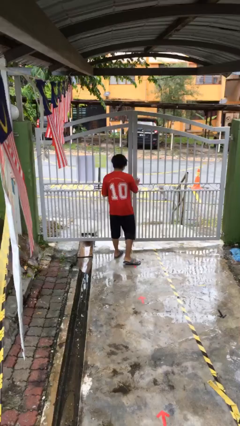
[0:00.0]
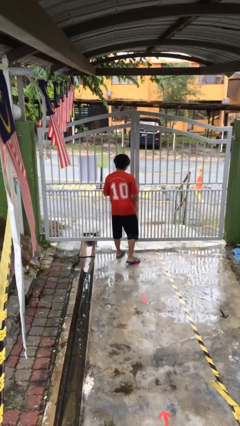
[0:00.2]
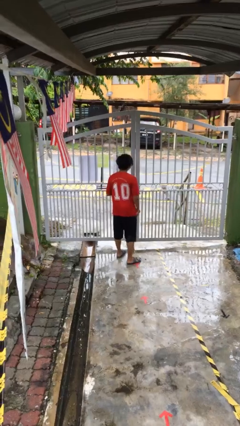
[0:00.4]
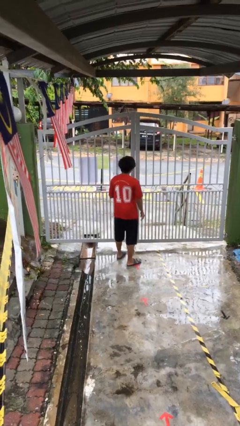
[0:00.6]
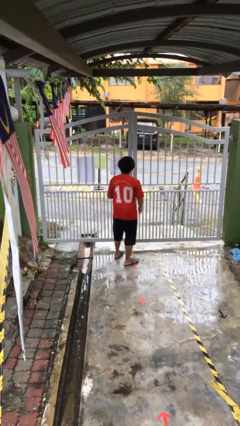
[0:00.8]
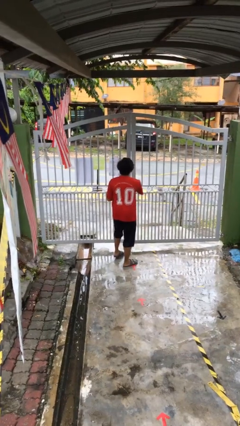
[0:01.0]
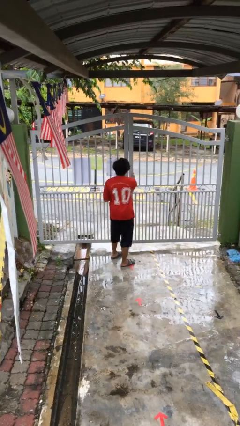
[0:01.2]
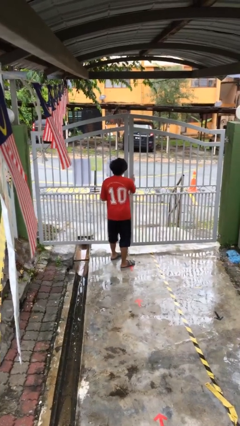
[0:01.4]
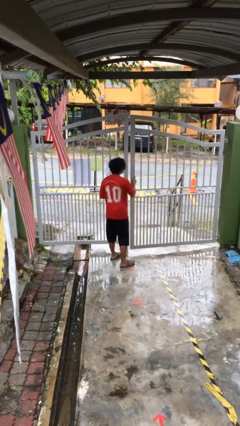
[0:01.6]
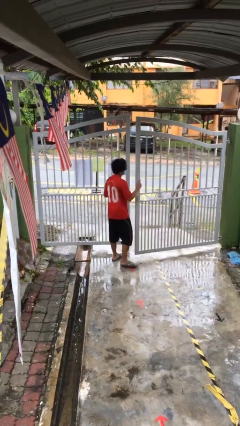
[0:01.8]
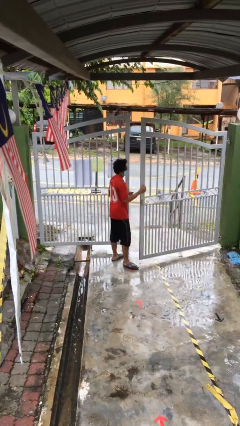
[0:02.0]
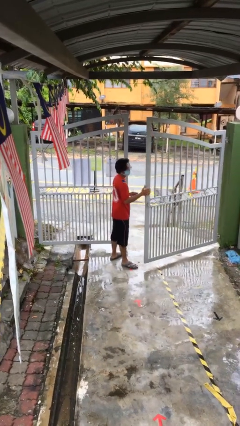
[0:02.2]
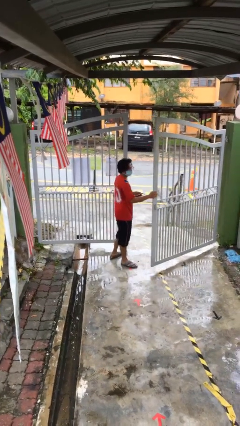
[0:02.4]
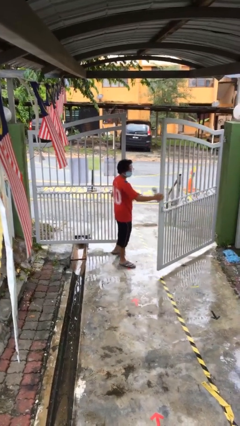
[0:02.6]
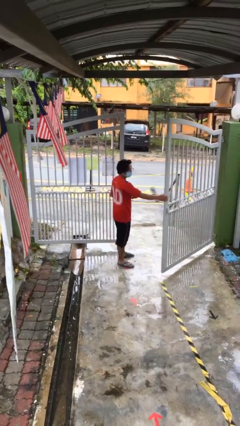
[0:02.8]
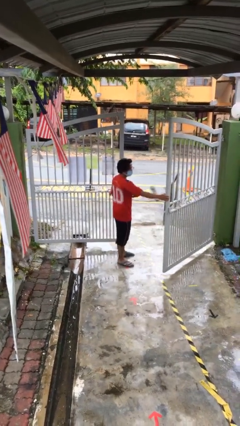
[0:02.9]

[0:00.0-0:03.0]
person opens facility door

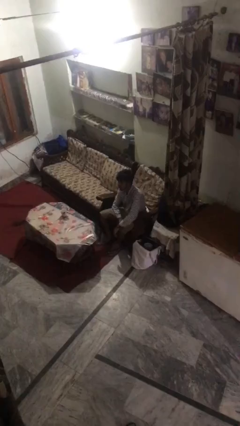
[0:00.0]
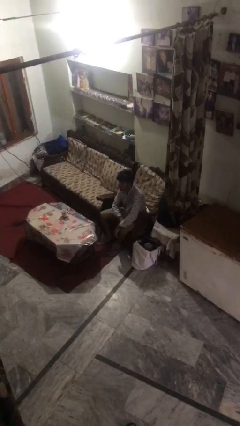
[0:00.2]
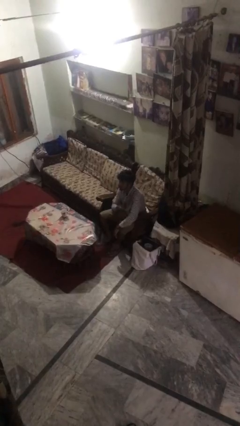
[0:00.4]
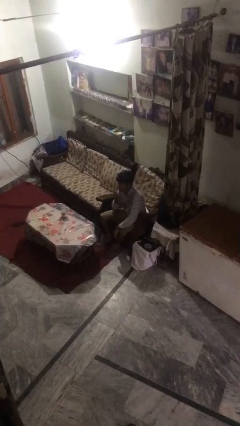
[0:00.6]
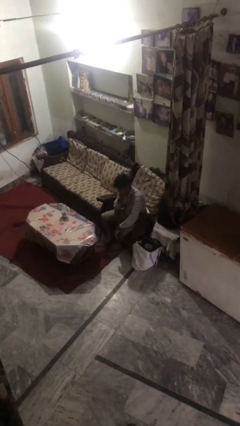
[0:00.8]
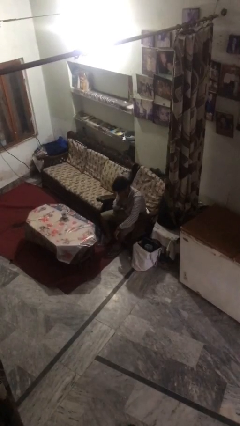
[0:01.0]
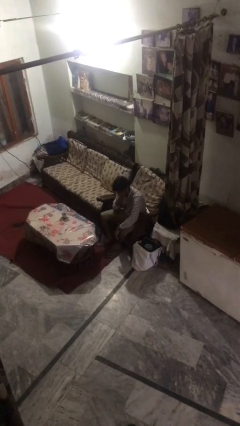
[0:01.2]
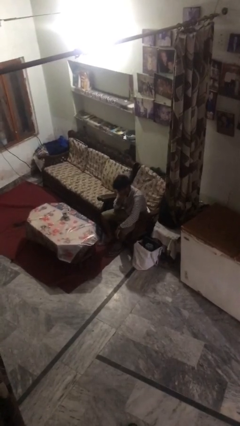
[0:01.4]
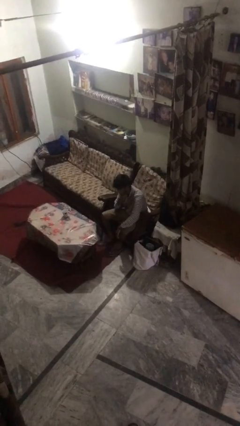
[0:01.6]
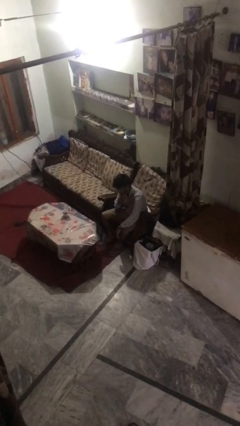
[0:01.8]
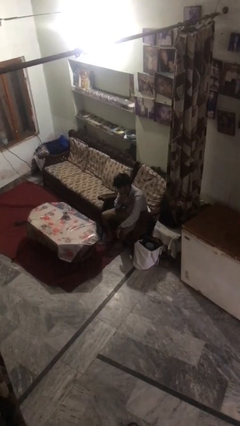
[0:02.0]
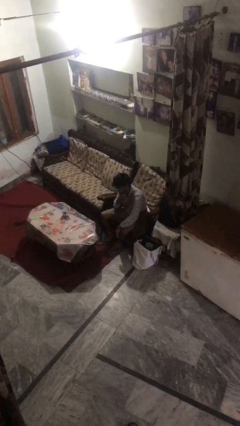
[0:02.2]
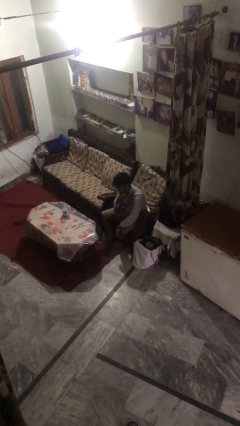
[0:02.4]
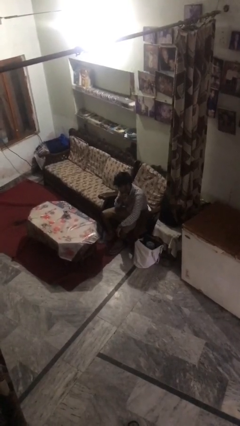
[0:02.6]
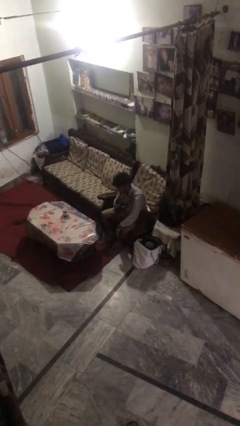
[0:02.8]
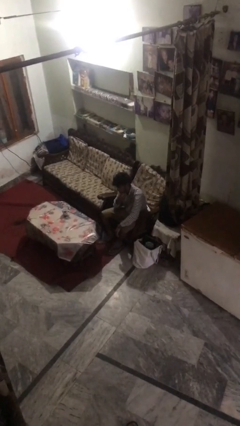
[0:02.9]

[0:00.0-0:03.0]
person strokes chin

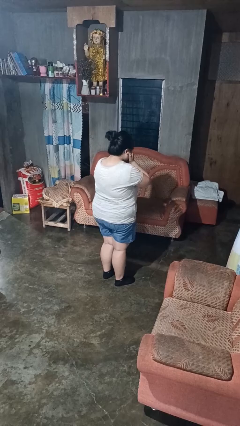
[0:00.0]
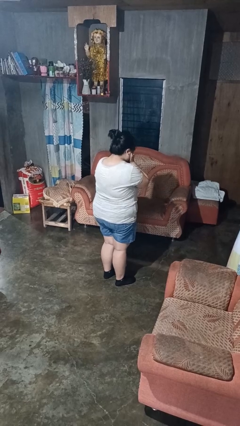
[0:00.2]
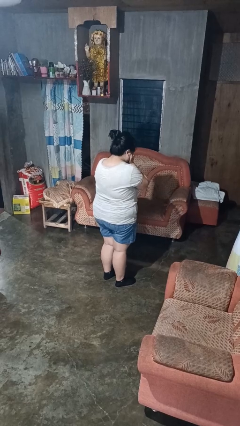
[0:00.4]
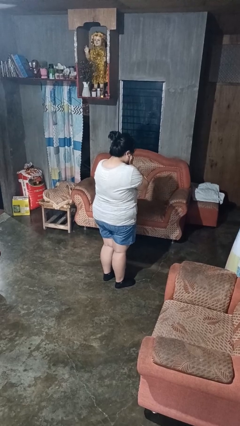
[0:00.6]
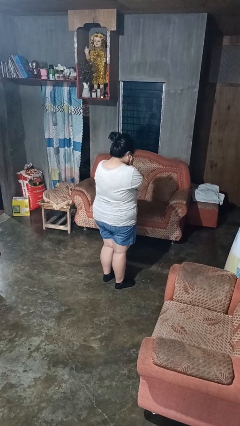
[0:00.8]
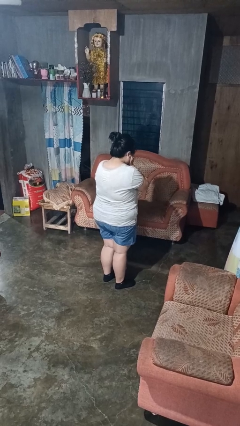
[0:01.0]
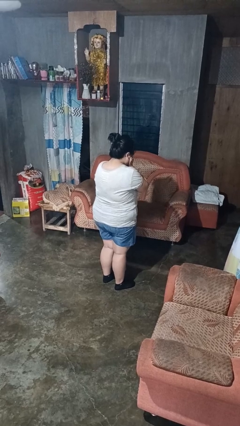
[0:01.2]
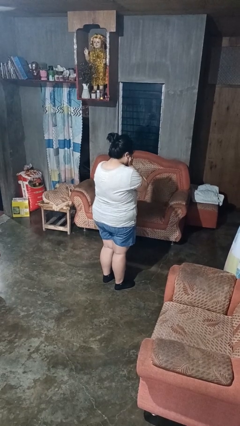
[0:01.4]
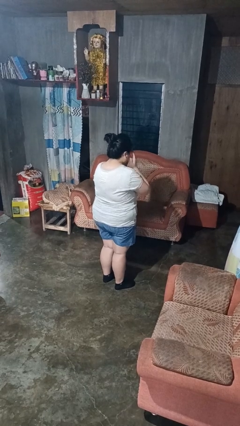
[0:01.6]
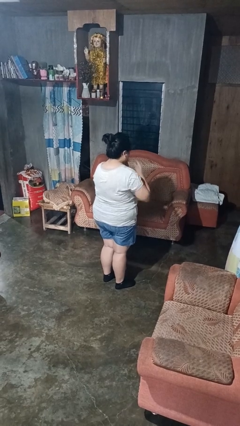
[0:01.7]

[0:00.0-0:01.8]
person covers face with hands

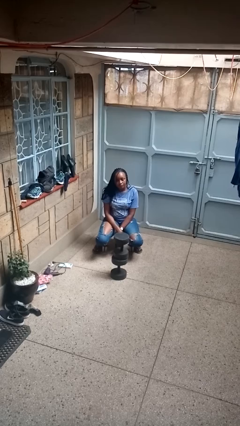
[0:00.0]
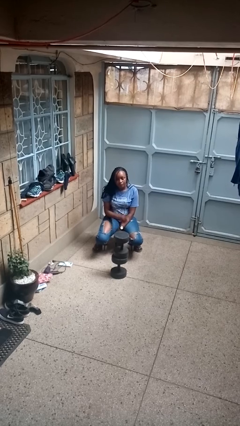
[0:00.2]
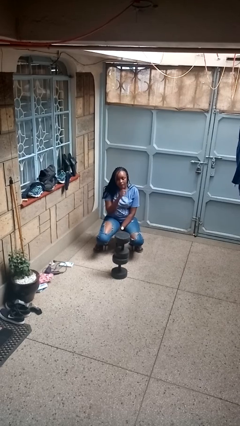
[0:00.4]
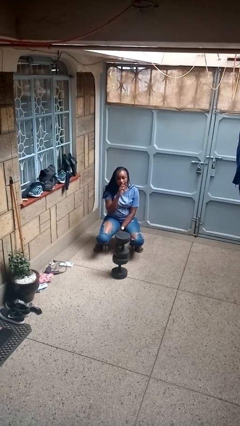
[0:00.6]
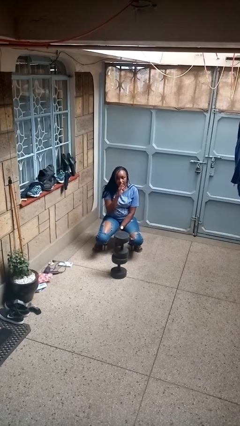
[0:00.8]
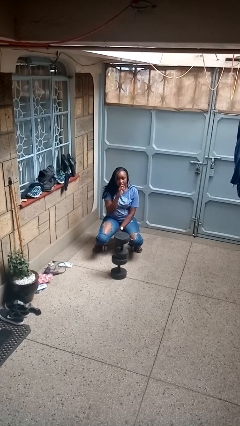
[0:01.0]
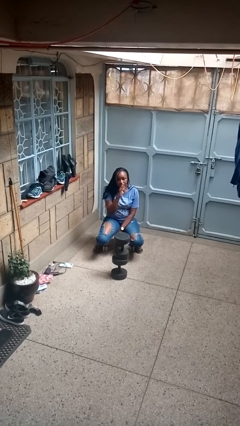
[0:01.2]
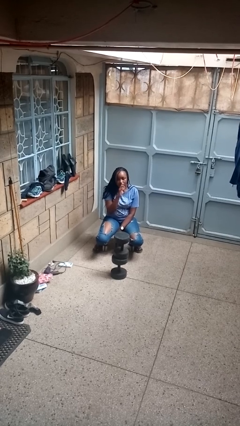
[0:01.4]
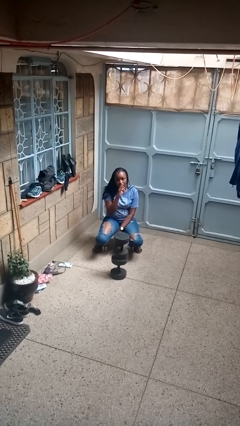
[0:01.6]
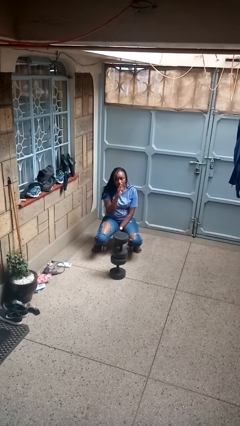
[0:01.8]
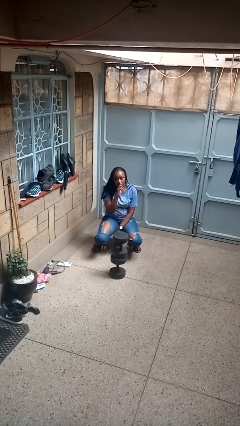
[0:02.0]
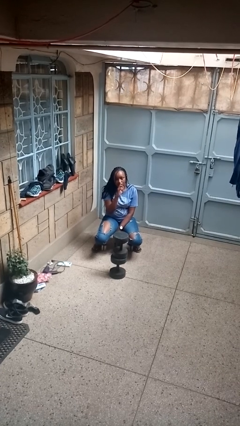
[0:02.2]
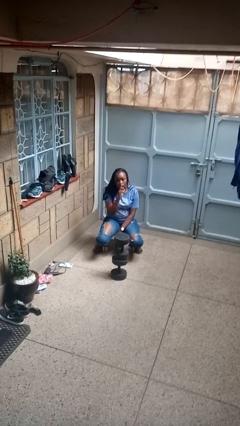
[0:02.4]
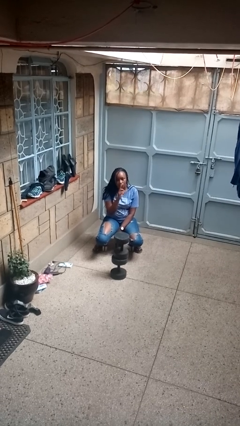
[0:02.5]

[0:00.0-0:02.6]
person gestures be quiet

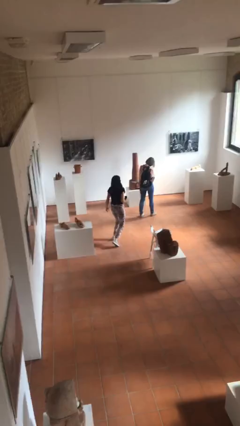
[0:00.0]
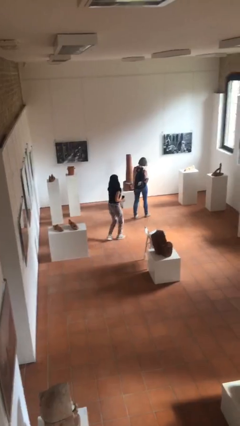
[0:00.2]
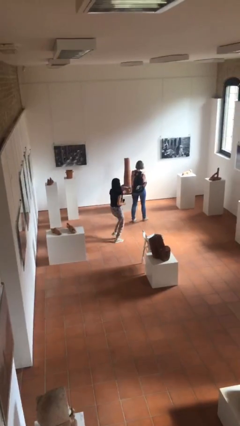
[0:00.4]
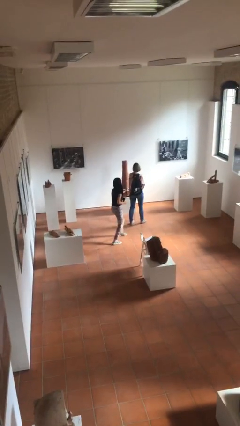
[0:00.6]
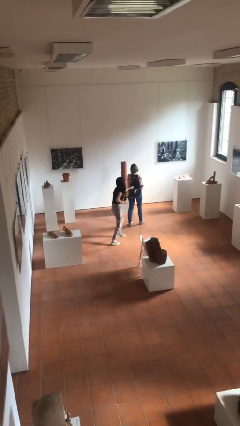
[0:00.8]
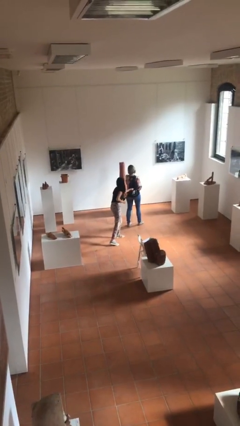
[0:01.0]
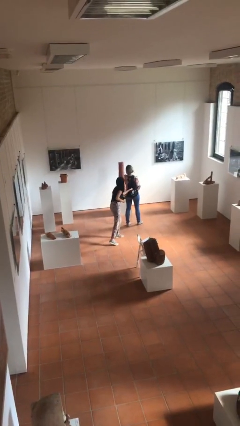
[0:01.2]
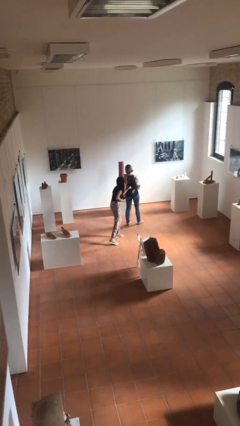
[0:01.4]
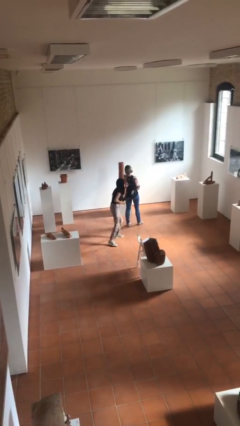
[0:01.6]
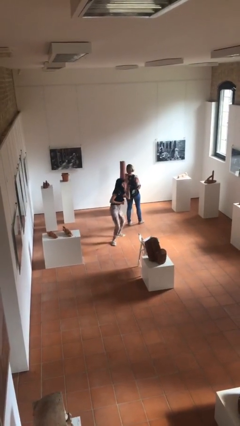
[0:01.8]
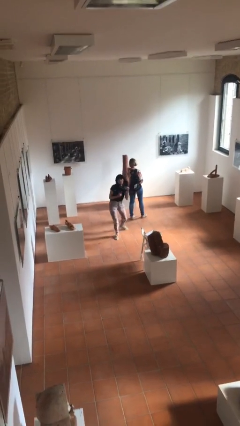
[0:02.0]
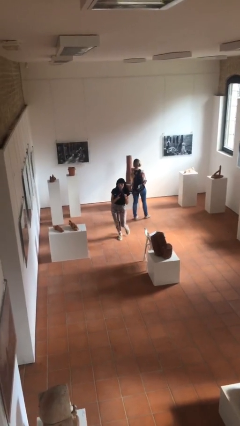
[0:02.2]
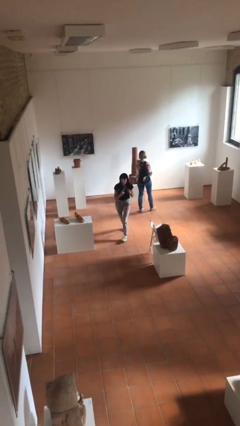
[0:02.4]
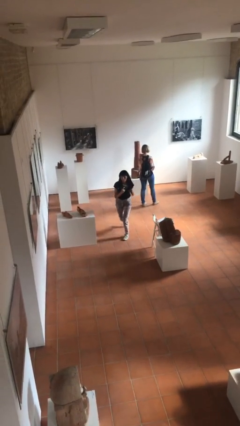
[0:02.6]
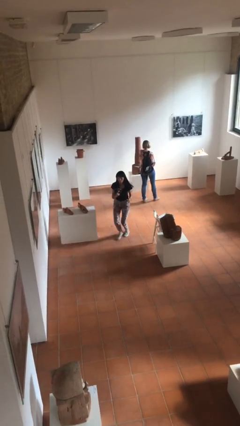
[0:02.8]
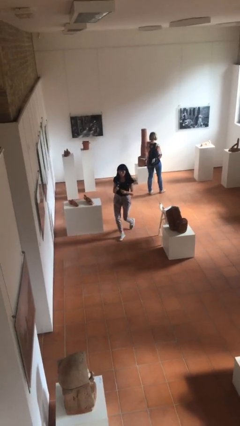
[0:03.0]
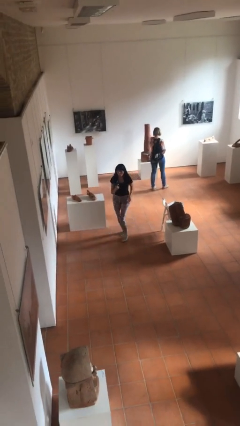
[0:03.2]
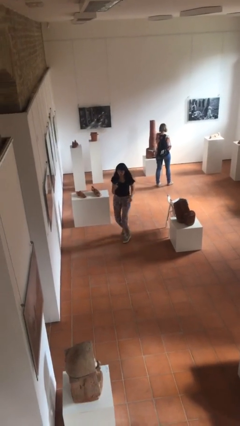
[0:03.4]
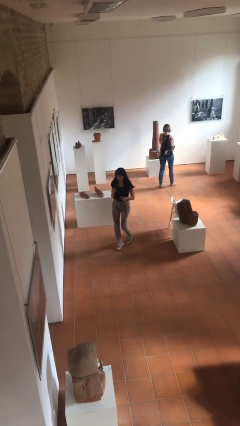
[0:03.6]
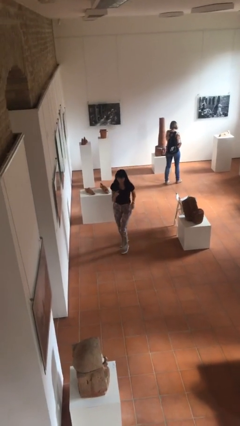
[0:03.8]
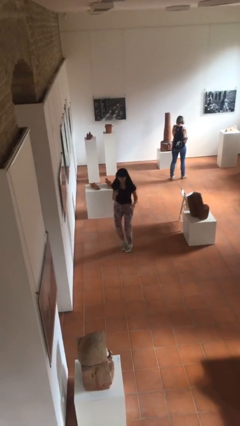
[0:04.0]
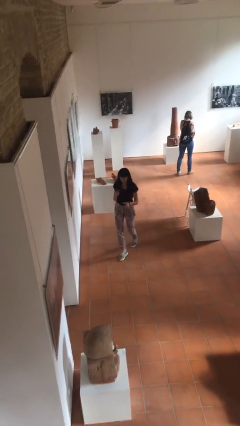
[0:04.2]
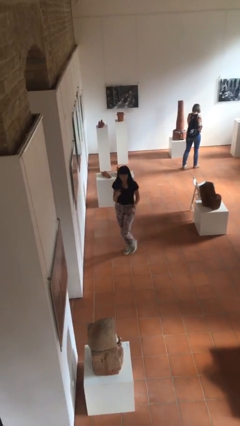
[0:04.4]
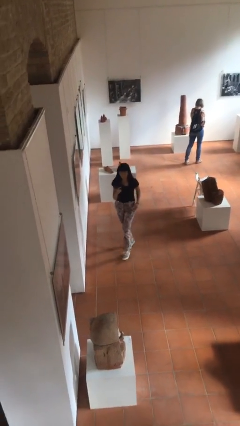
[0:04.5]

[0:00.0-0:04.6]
person steals object from person

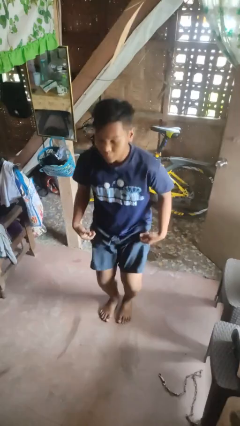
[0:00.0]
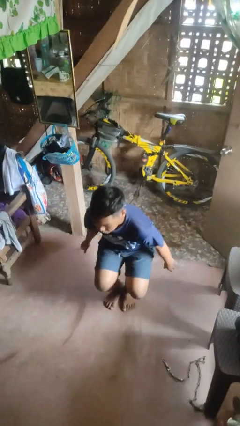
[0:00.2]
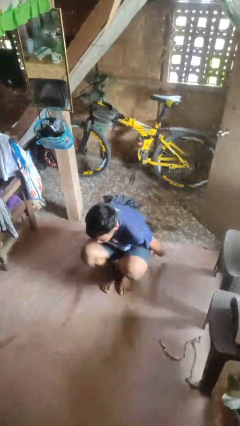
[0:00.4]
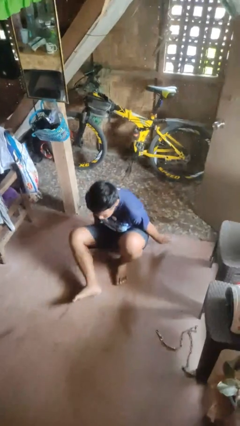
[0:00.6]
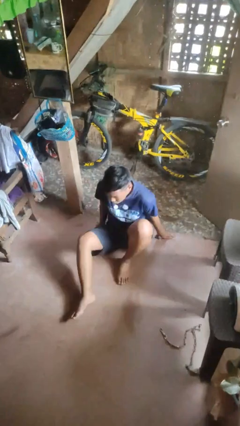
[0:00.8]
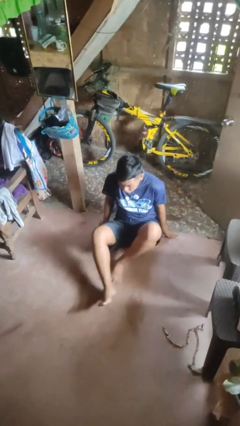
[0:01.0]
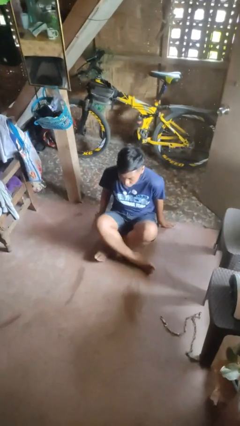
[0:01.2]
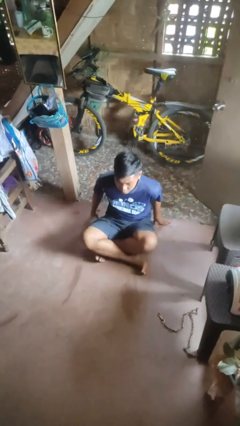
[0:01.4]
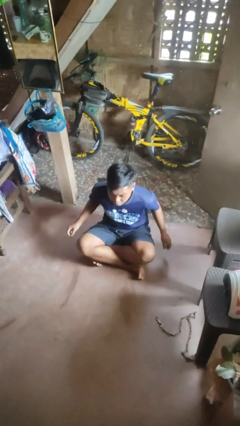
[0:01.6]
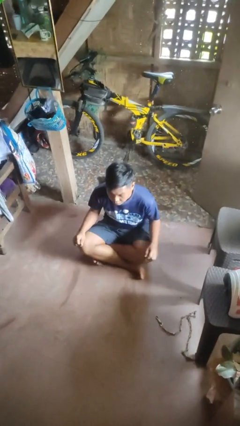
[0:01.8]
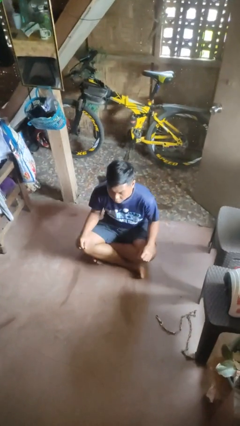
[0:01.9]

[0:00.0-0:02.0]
person sits crisscross

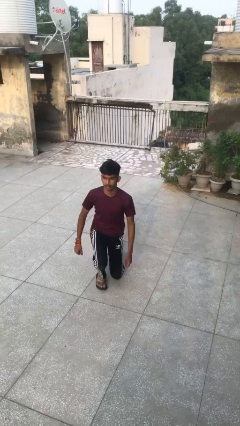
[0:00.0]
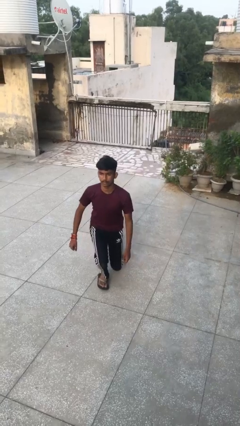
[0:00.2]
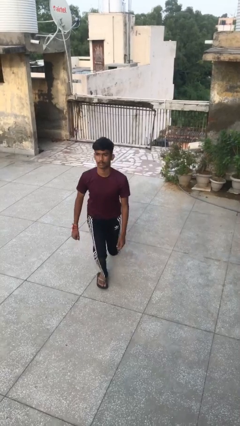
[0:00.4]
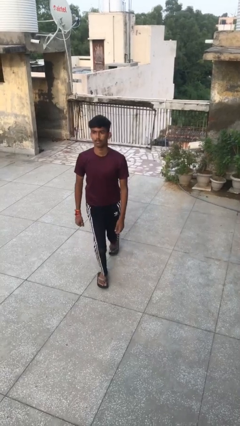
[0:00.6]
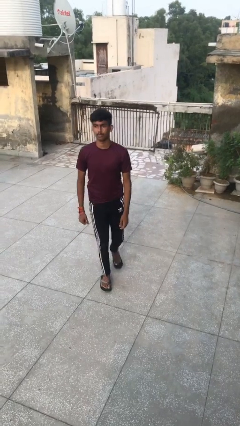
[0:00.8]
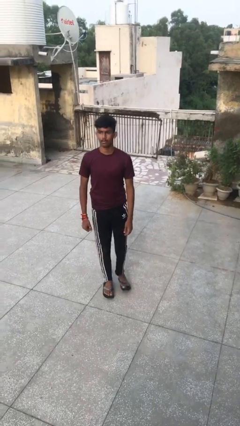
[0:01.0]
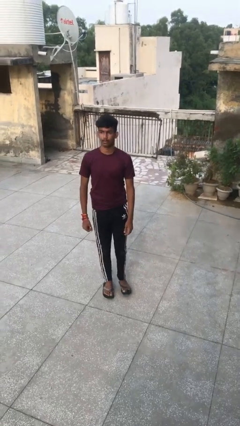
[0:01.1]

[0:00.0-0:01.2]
person stands up from floor
